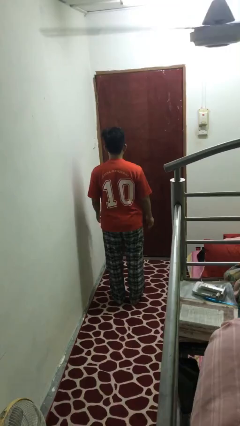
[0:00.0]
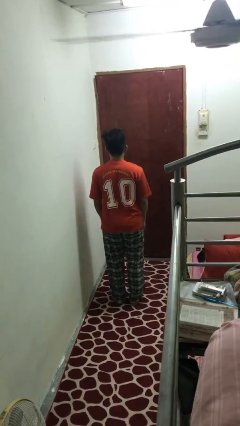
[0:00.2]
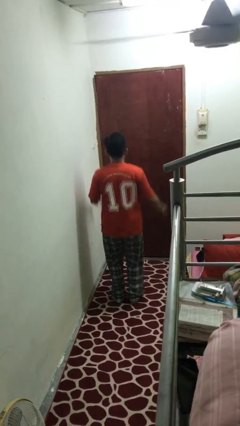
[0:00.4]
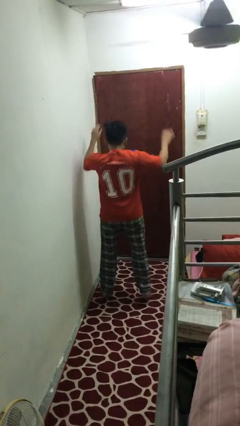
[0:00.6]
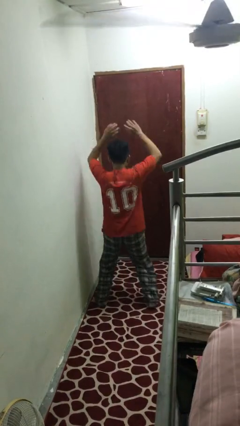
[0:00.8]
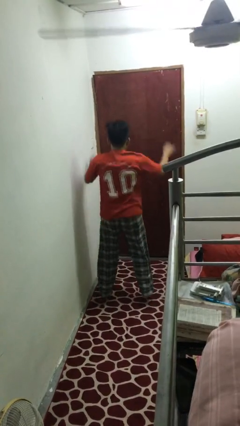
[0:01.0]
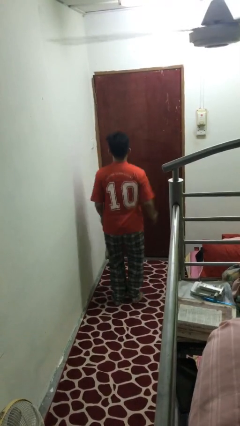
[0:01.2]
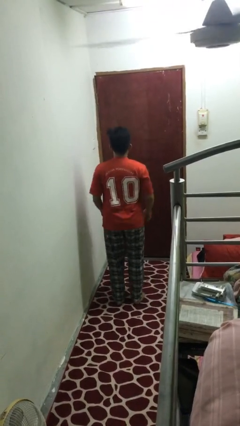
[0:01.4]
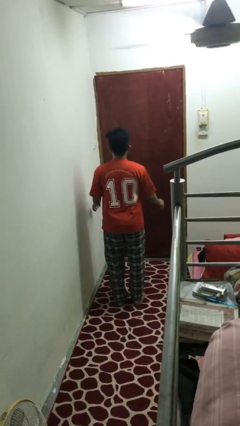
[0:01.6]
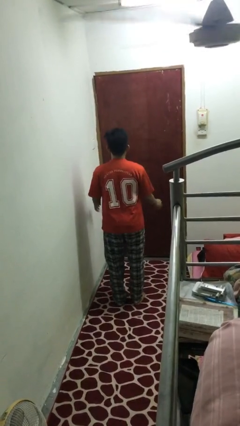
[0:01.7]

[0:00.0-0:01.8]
person exercises with jumping jacks

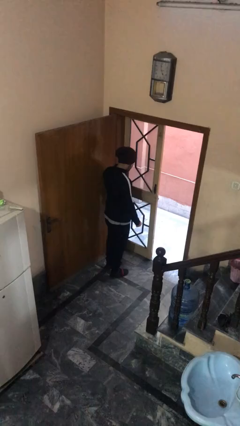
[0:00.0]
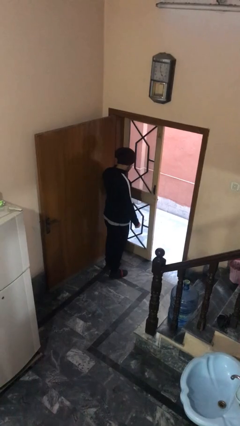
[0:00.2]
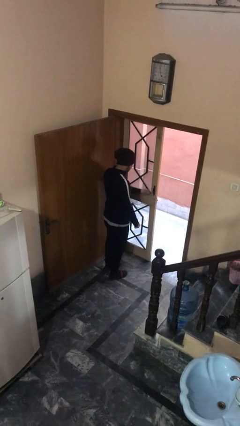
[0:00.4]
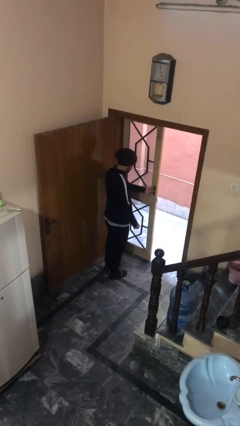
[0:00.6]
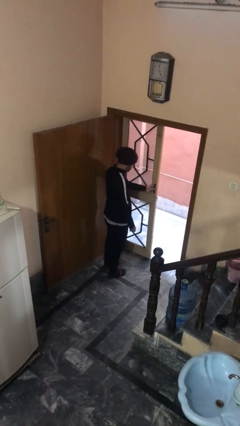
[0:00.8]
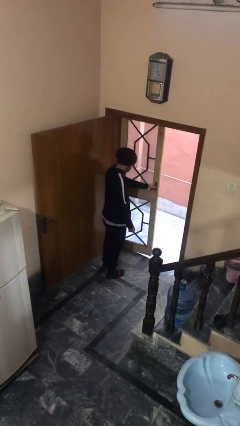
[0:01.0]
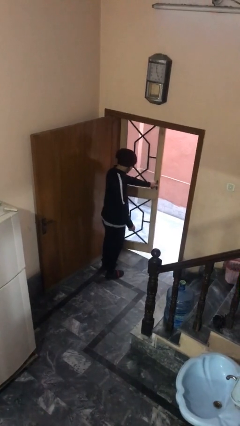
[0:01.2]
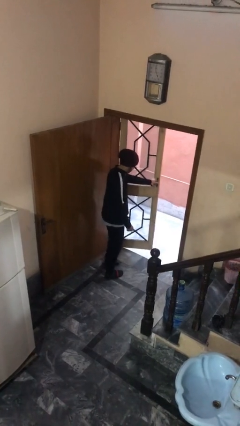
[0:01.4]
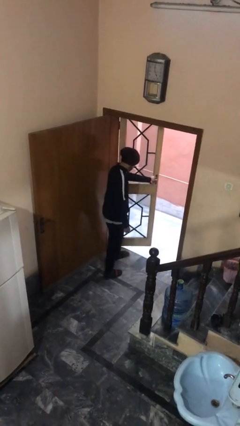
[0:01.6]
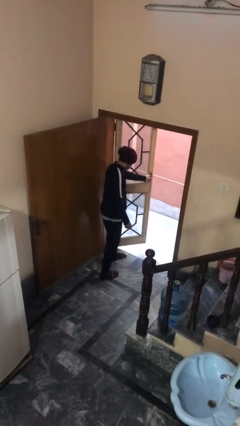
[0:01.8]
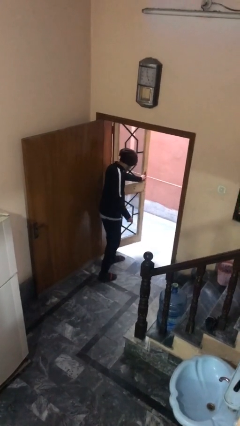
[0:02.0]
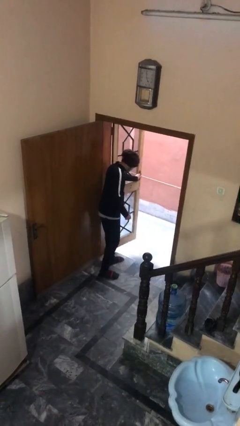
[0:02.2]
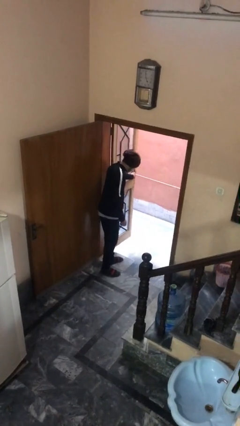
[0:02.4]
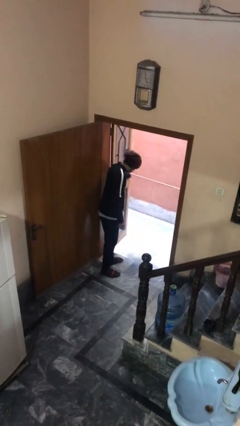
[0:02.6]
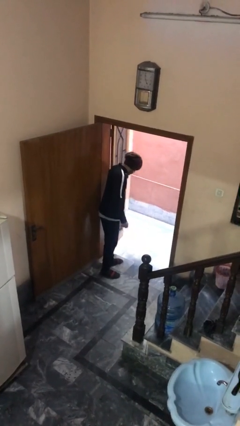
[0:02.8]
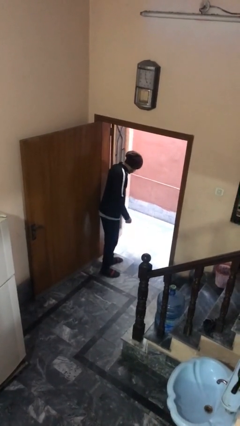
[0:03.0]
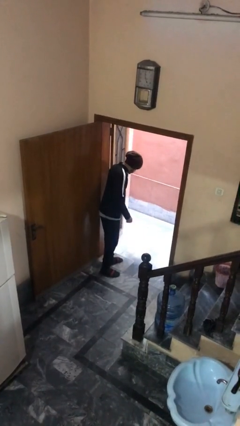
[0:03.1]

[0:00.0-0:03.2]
person opens facility door

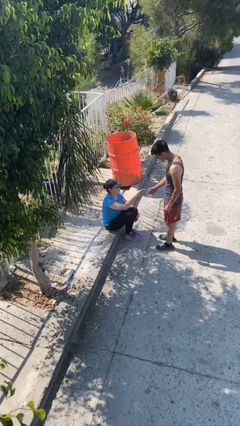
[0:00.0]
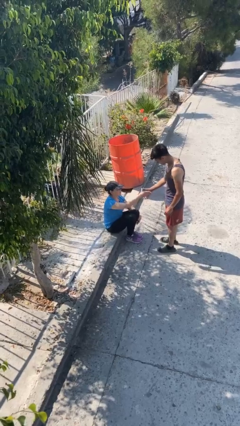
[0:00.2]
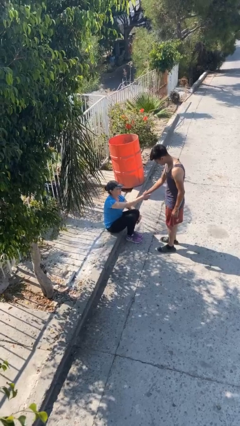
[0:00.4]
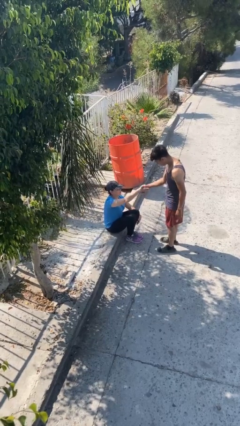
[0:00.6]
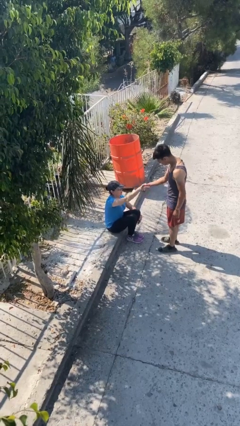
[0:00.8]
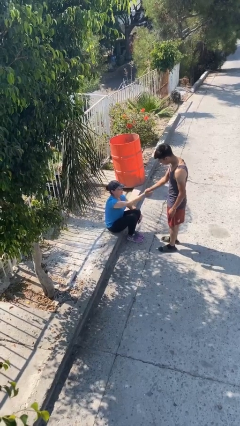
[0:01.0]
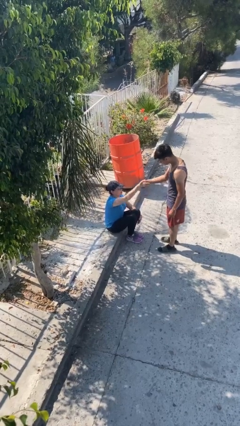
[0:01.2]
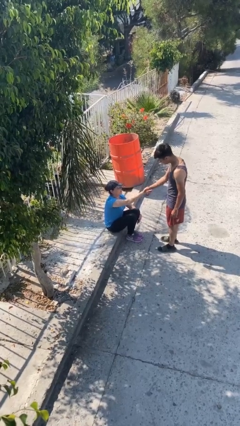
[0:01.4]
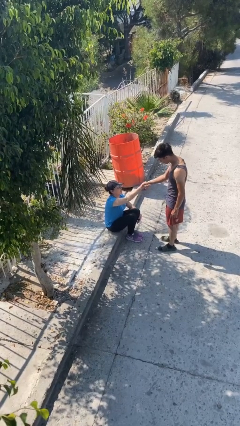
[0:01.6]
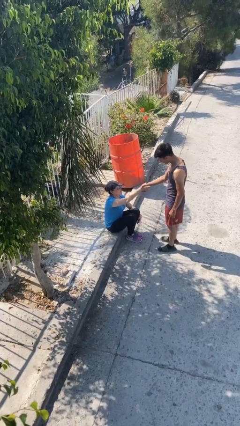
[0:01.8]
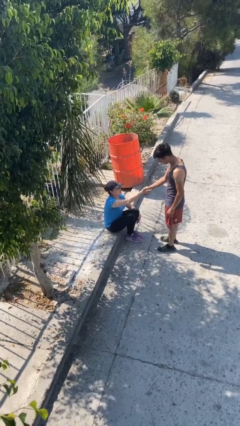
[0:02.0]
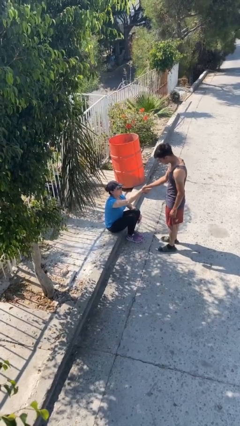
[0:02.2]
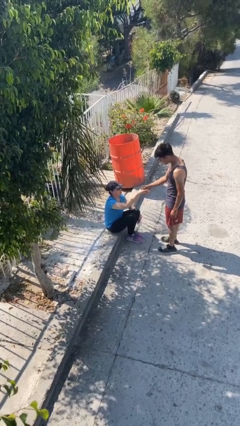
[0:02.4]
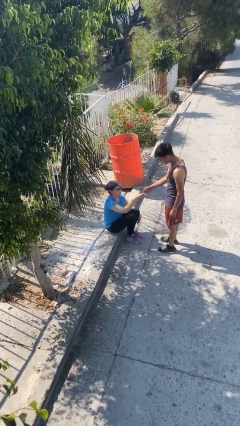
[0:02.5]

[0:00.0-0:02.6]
person shakes hand

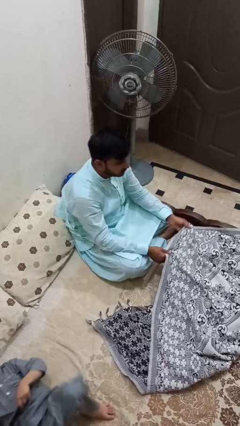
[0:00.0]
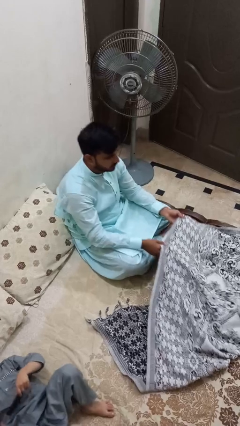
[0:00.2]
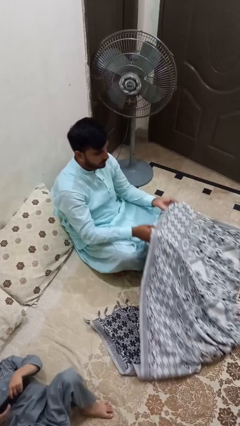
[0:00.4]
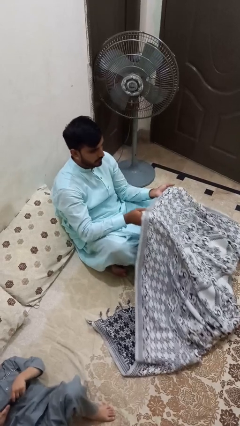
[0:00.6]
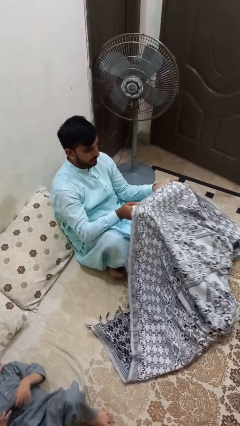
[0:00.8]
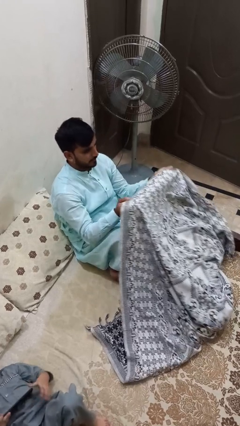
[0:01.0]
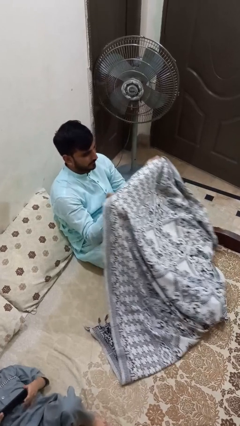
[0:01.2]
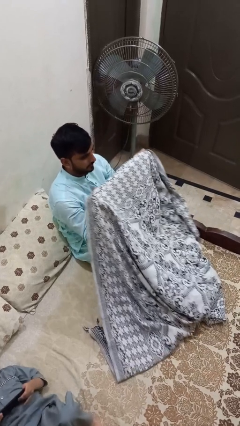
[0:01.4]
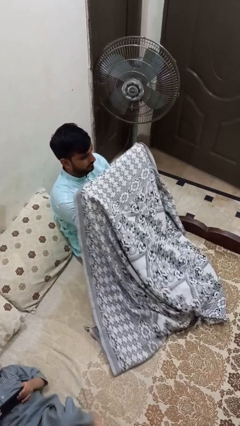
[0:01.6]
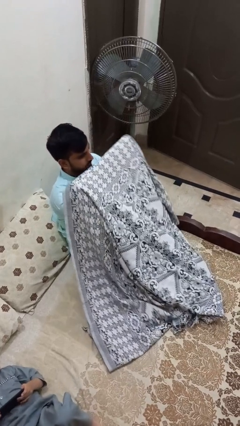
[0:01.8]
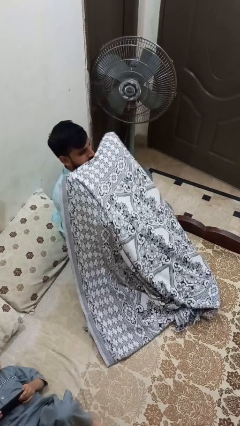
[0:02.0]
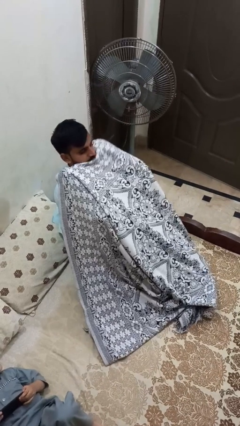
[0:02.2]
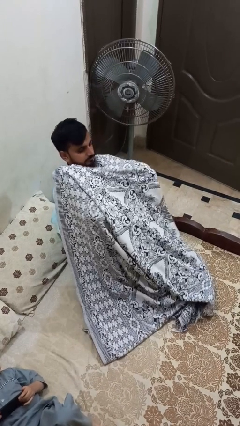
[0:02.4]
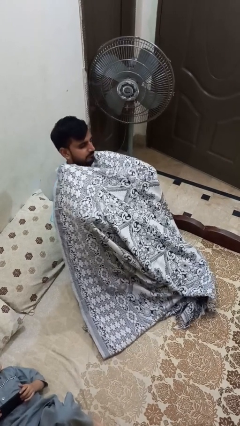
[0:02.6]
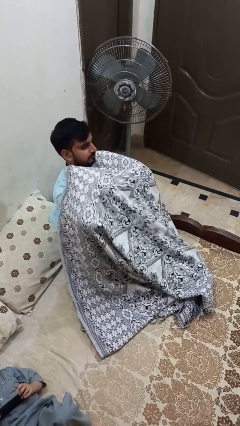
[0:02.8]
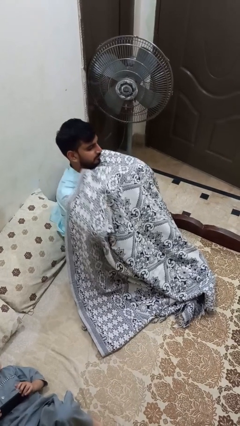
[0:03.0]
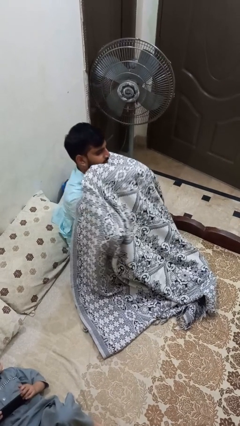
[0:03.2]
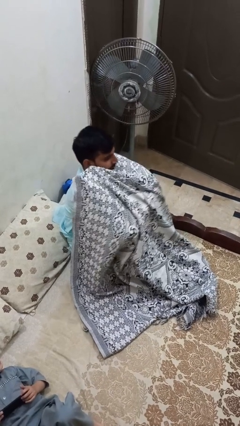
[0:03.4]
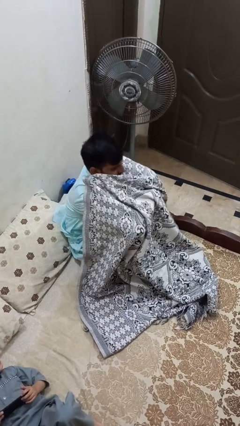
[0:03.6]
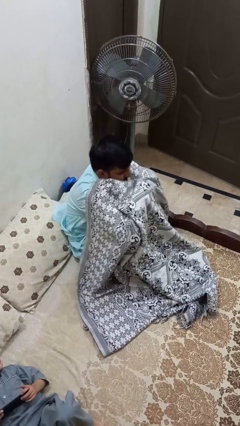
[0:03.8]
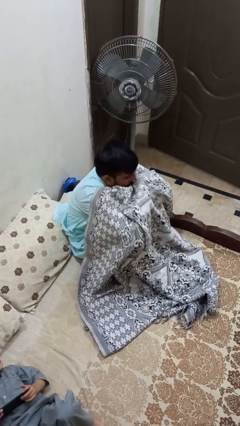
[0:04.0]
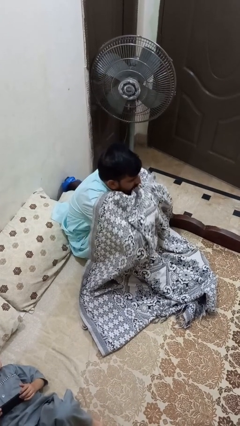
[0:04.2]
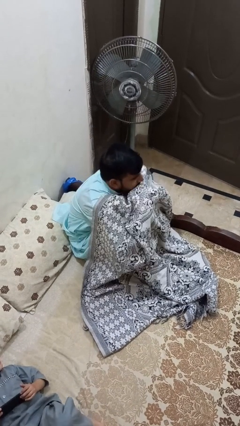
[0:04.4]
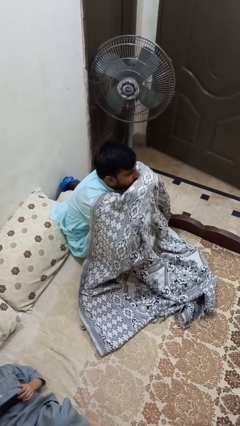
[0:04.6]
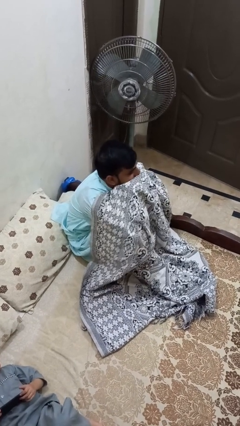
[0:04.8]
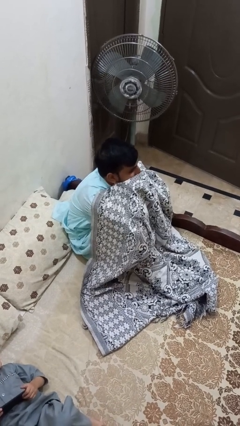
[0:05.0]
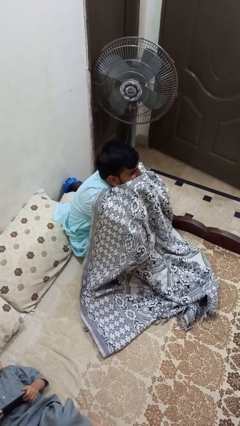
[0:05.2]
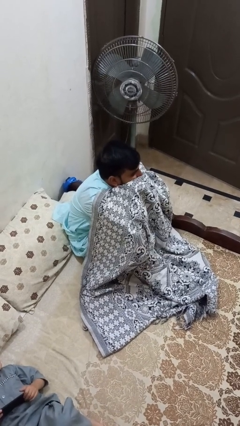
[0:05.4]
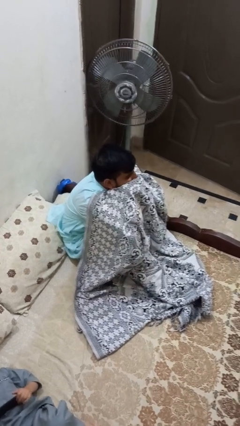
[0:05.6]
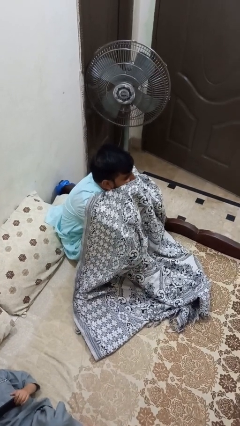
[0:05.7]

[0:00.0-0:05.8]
person covers with blanket

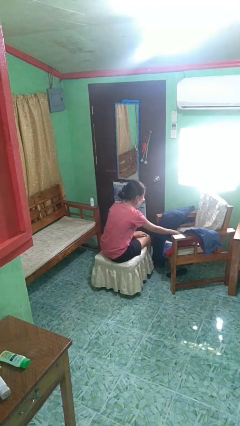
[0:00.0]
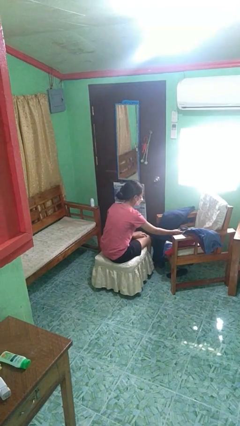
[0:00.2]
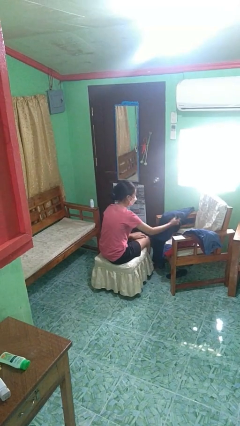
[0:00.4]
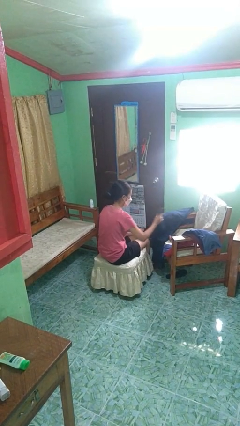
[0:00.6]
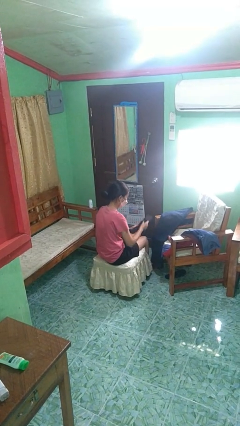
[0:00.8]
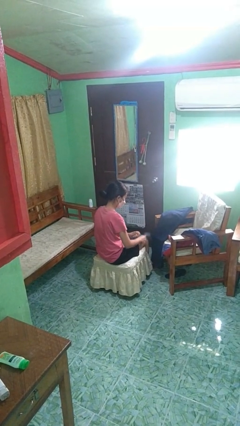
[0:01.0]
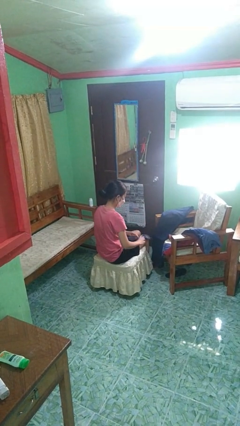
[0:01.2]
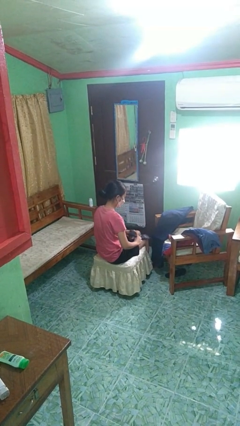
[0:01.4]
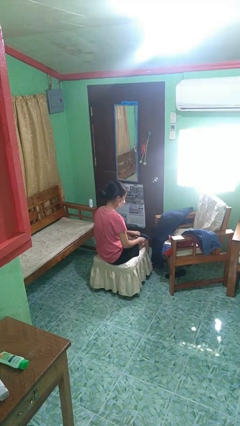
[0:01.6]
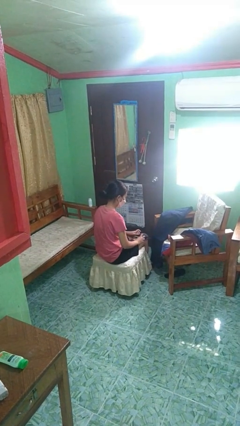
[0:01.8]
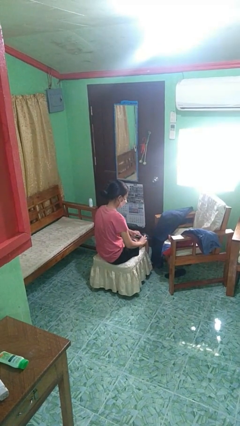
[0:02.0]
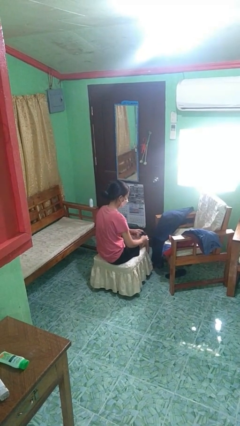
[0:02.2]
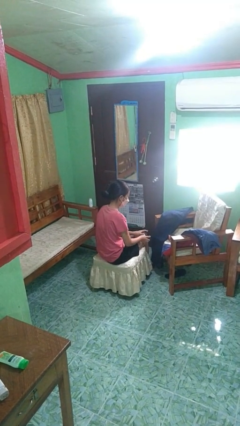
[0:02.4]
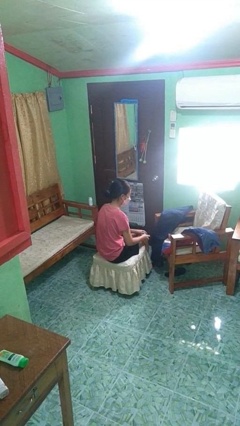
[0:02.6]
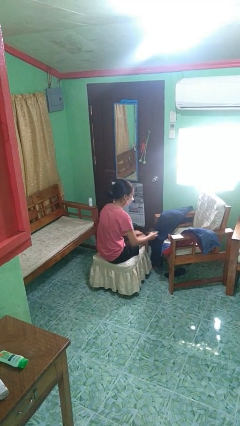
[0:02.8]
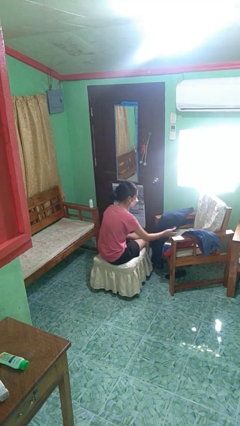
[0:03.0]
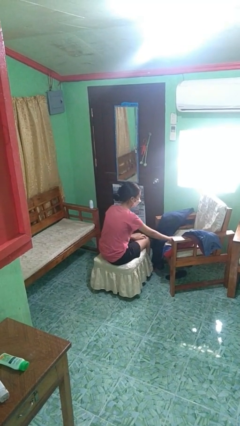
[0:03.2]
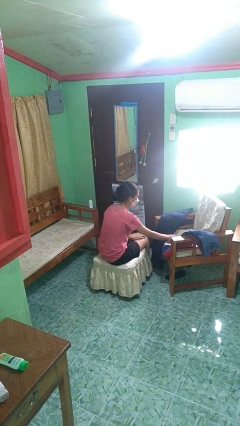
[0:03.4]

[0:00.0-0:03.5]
person folds socks

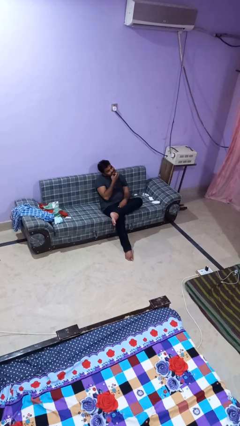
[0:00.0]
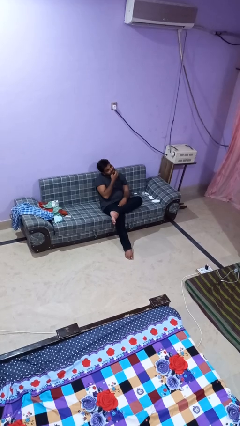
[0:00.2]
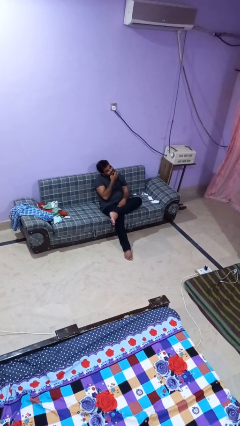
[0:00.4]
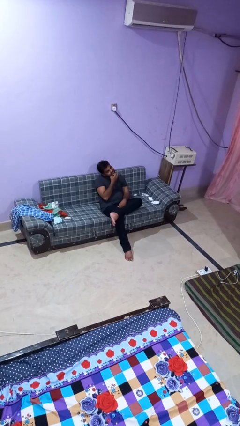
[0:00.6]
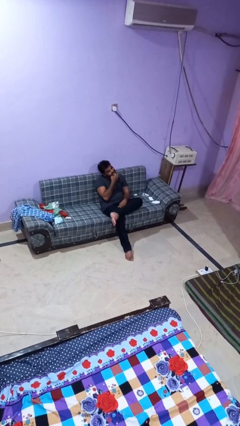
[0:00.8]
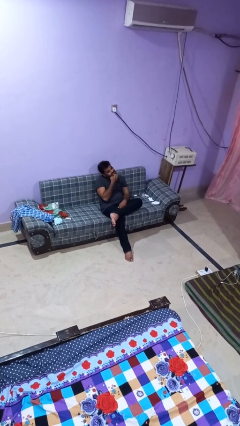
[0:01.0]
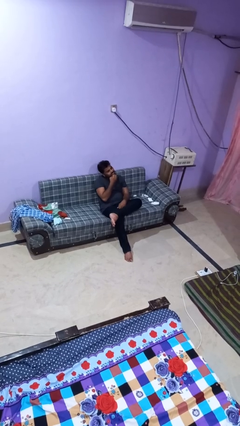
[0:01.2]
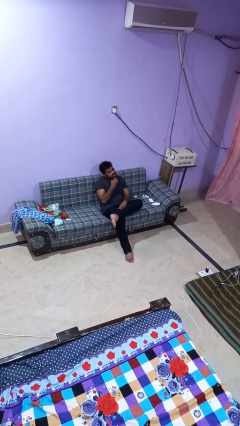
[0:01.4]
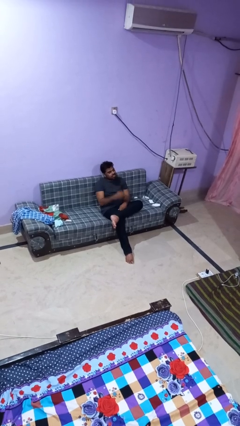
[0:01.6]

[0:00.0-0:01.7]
person strokes chin
